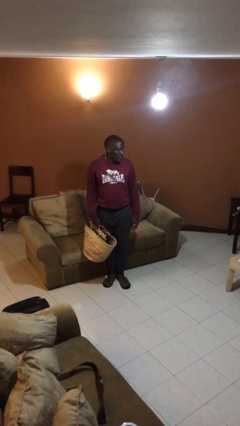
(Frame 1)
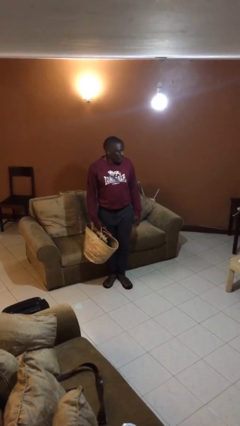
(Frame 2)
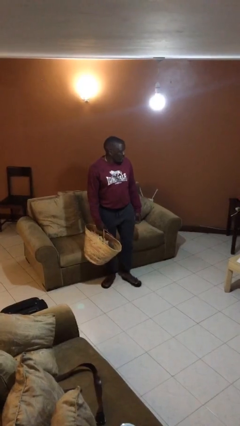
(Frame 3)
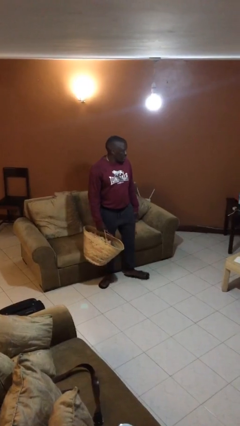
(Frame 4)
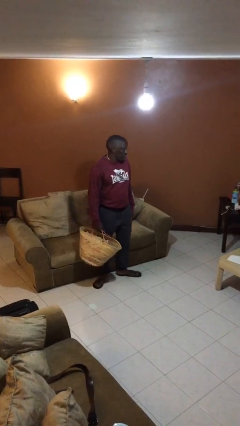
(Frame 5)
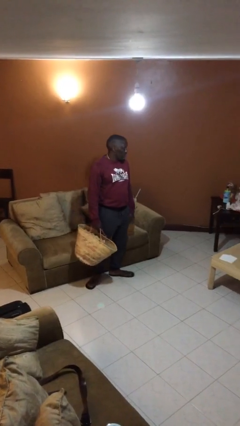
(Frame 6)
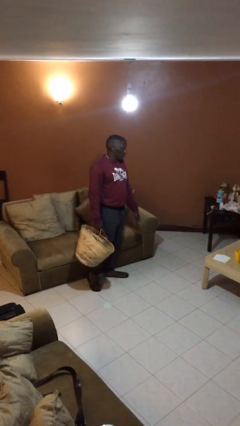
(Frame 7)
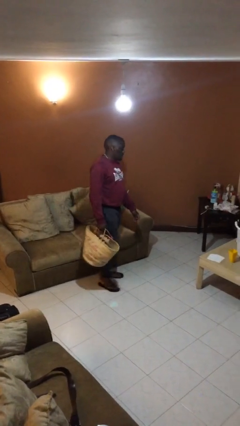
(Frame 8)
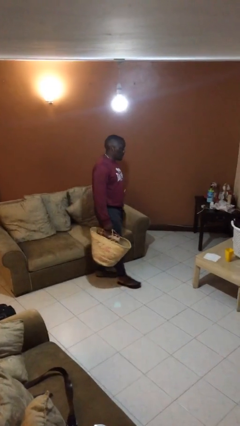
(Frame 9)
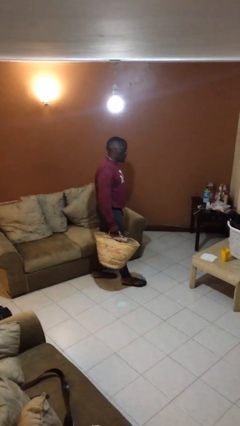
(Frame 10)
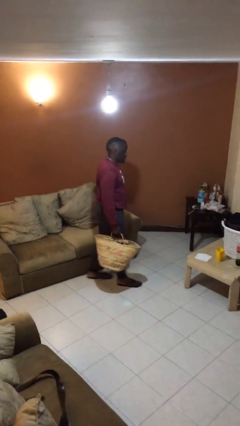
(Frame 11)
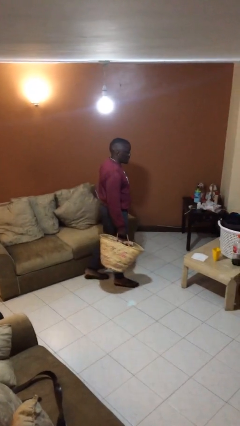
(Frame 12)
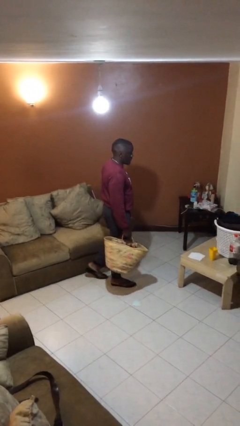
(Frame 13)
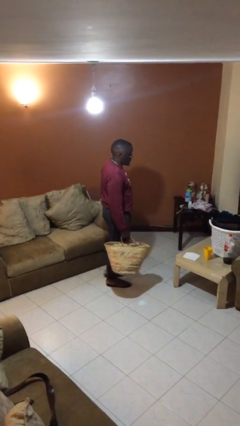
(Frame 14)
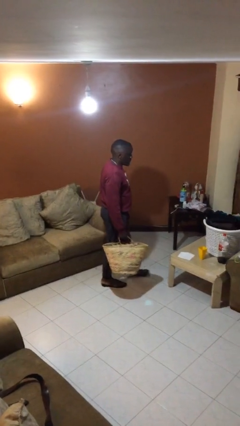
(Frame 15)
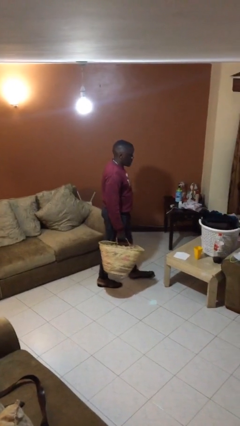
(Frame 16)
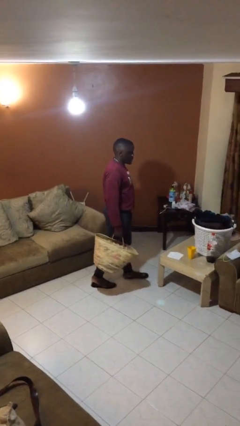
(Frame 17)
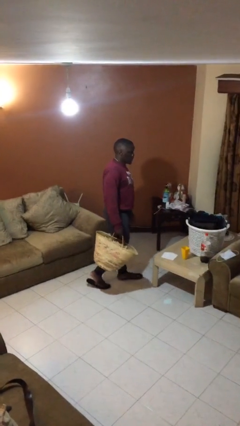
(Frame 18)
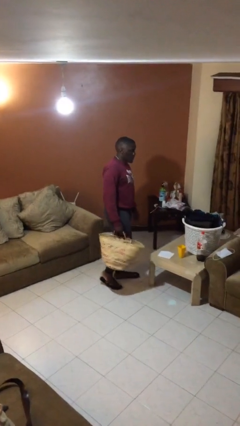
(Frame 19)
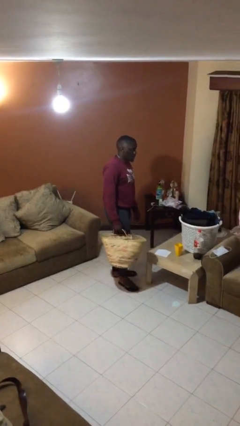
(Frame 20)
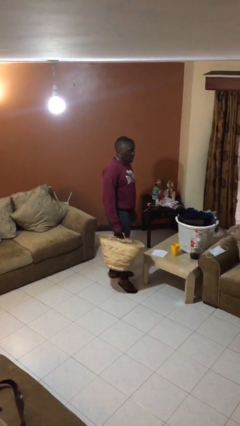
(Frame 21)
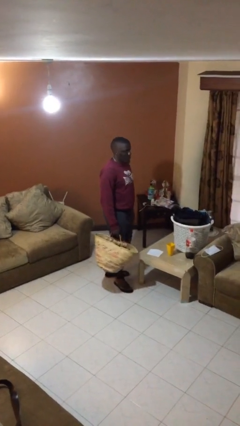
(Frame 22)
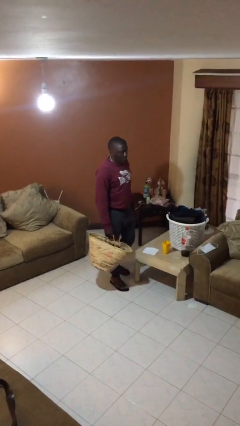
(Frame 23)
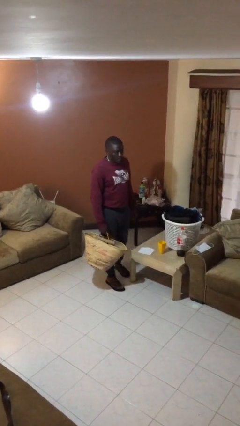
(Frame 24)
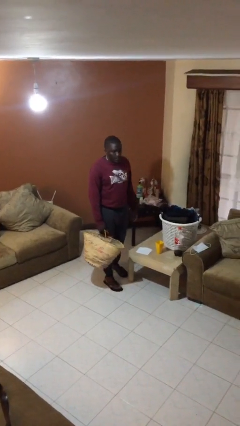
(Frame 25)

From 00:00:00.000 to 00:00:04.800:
person carries groceries

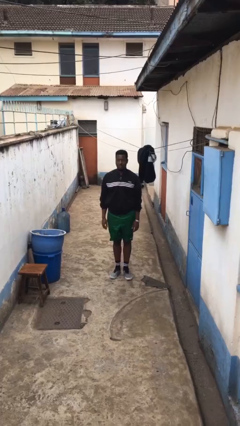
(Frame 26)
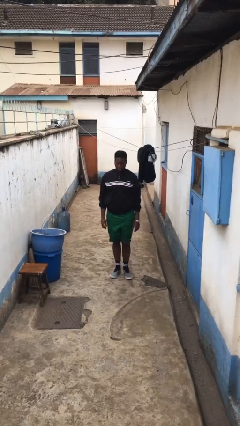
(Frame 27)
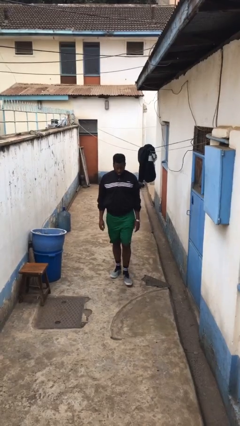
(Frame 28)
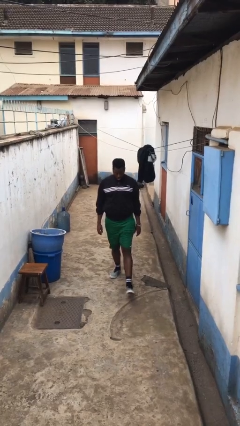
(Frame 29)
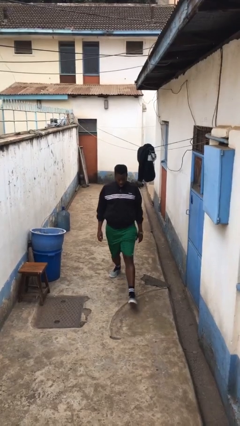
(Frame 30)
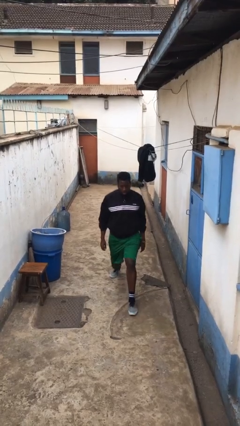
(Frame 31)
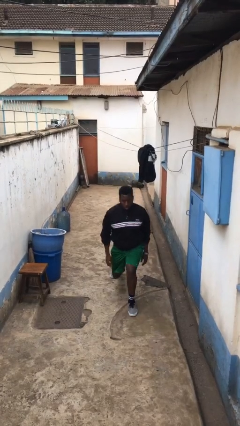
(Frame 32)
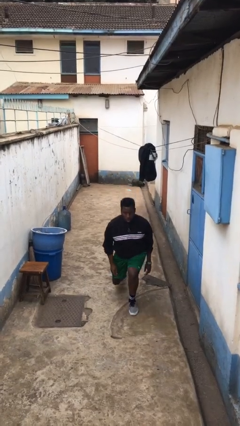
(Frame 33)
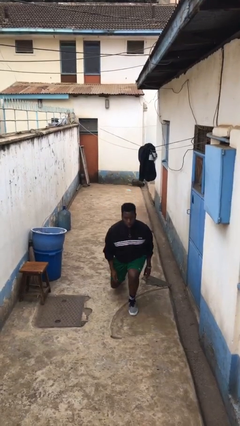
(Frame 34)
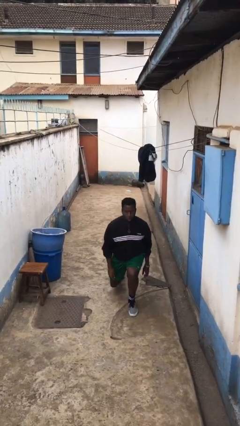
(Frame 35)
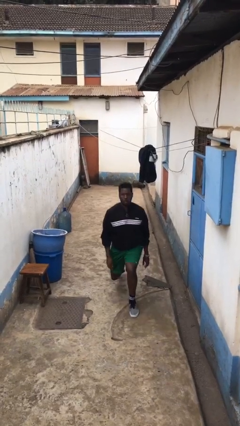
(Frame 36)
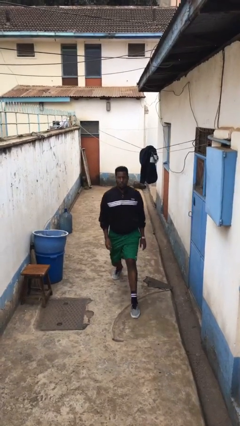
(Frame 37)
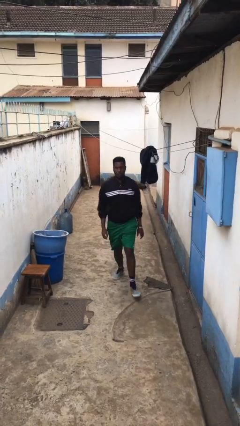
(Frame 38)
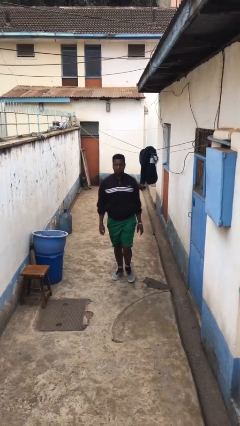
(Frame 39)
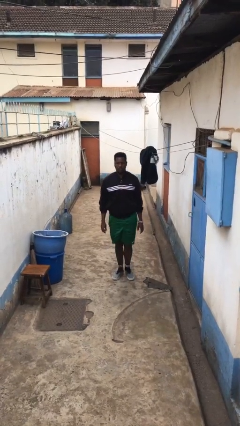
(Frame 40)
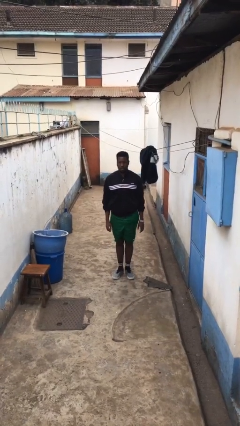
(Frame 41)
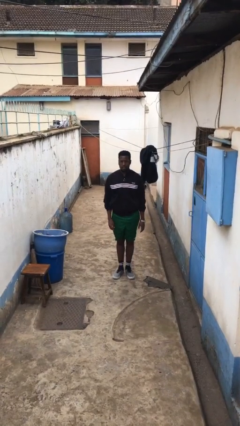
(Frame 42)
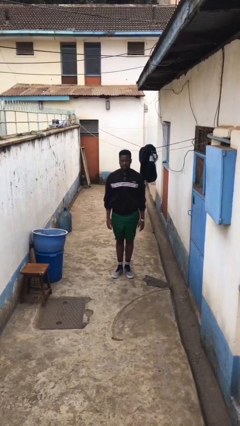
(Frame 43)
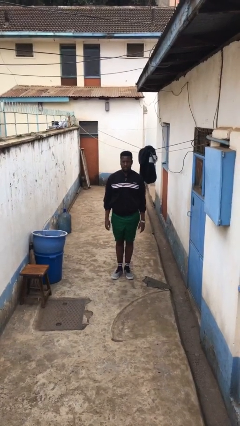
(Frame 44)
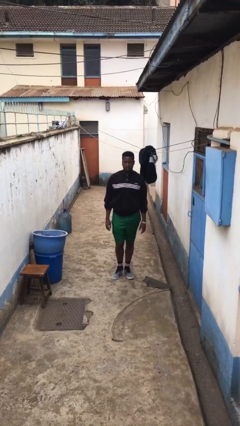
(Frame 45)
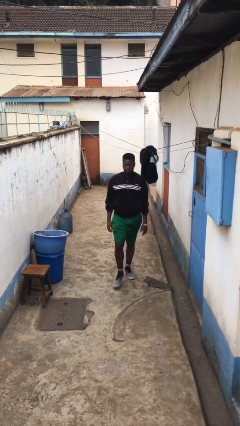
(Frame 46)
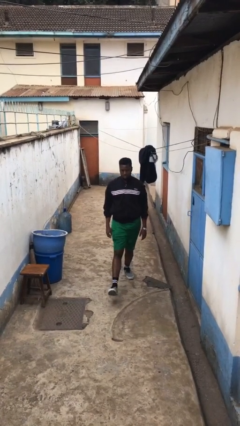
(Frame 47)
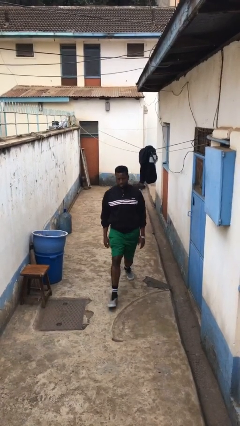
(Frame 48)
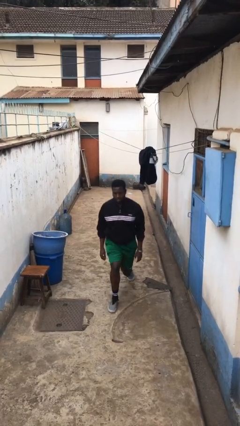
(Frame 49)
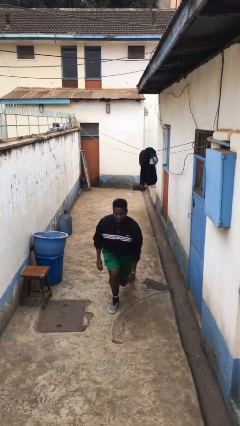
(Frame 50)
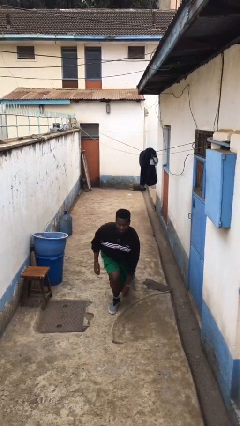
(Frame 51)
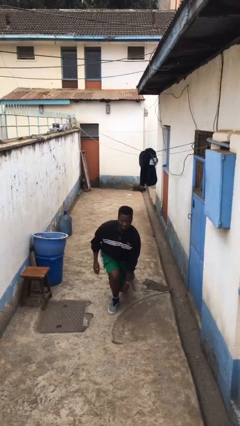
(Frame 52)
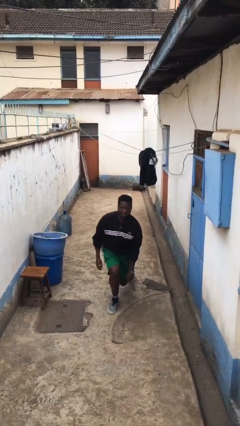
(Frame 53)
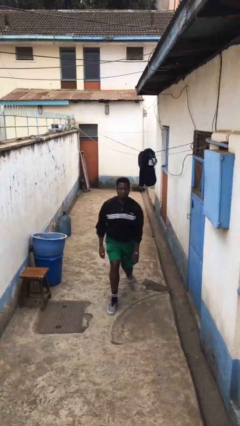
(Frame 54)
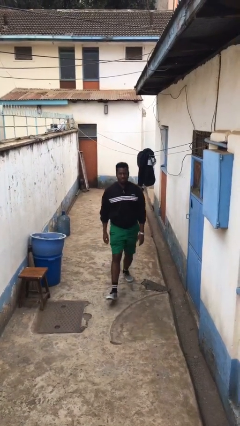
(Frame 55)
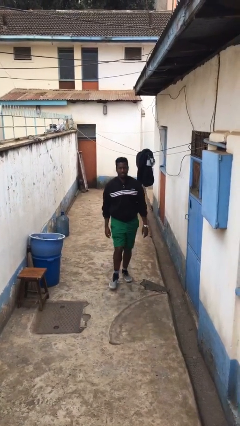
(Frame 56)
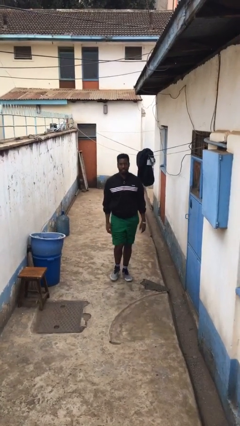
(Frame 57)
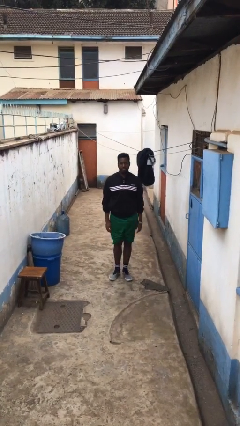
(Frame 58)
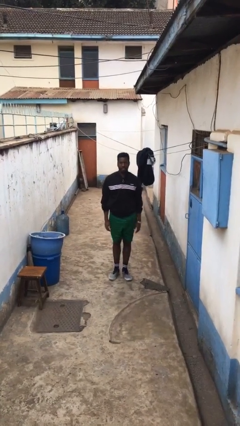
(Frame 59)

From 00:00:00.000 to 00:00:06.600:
person exercises with lunges

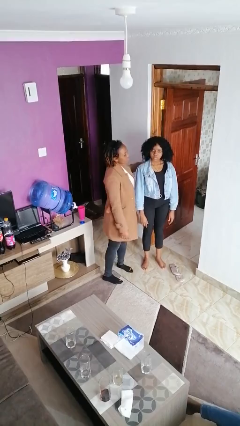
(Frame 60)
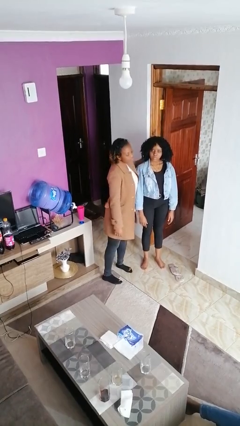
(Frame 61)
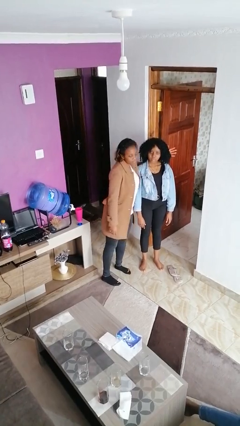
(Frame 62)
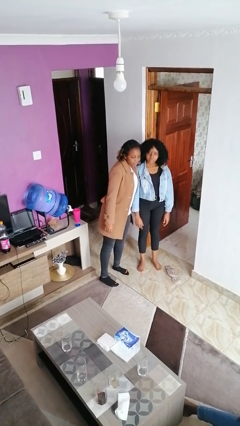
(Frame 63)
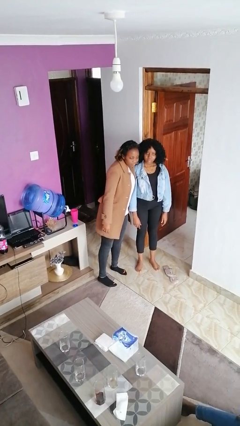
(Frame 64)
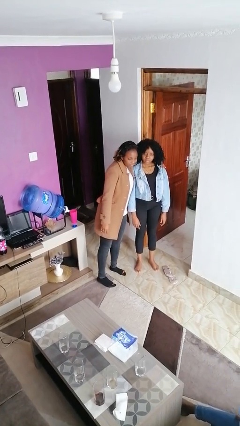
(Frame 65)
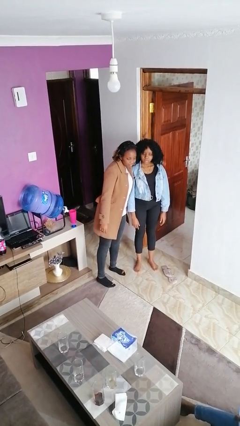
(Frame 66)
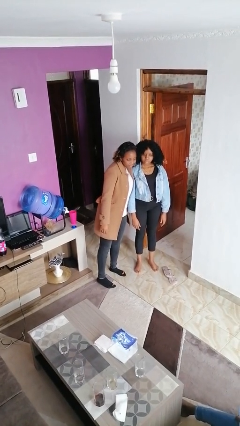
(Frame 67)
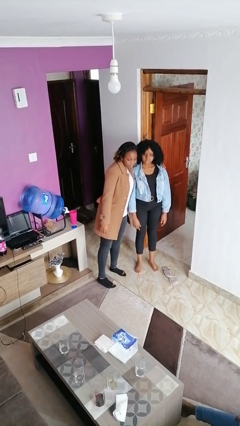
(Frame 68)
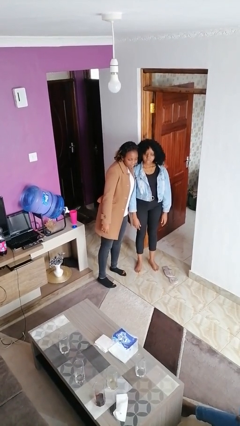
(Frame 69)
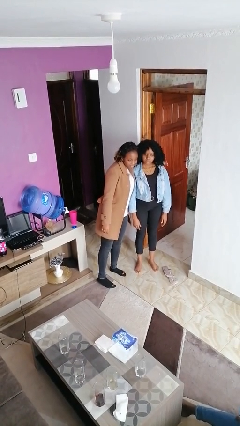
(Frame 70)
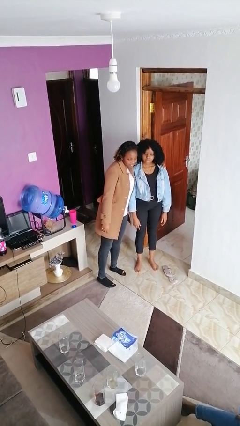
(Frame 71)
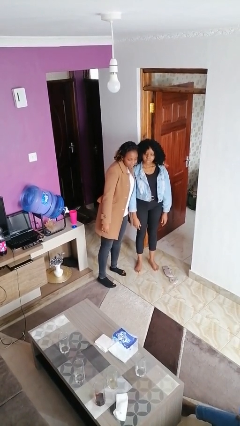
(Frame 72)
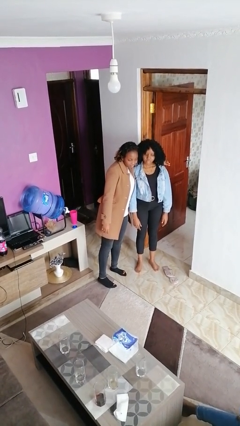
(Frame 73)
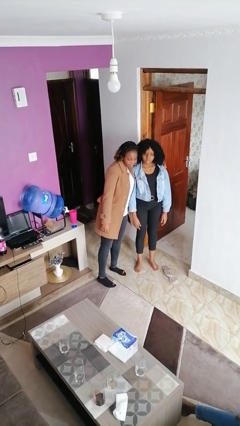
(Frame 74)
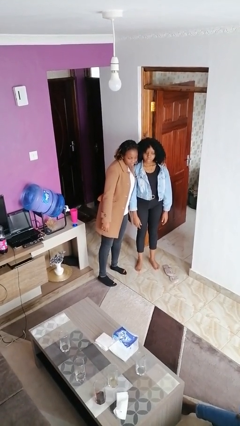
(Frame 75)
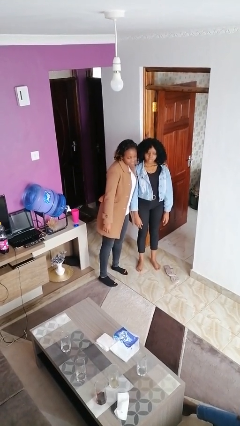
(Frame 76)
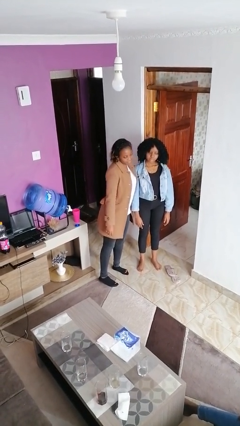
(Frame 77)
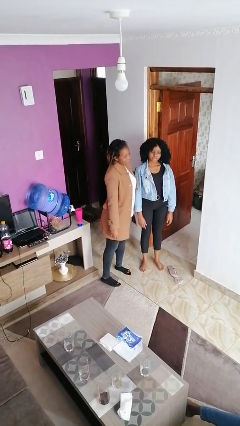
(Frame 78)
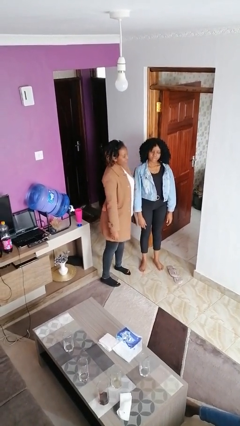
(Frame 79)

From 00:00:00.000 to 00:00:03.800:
person pounds shoulders of person

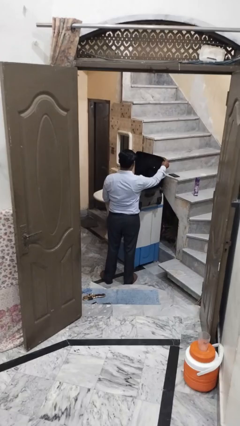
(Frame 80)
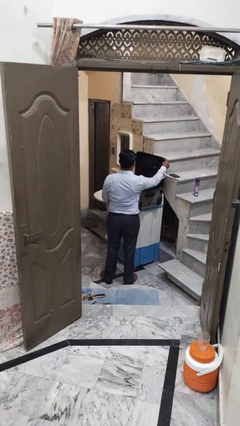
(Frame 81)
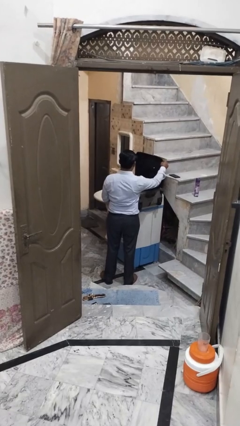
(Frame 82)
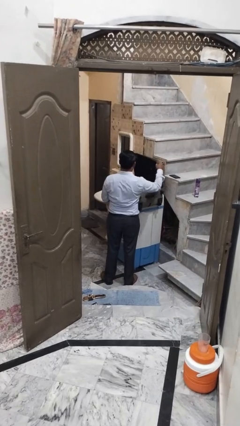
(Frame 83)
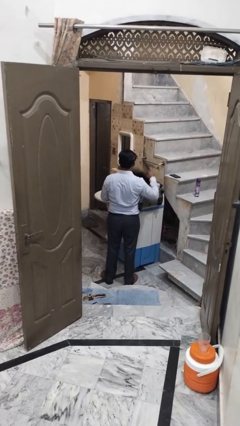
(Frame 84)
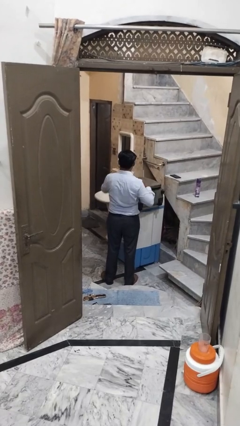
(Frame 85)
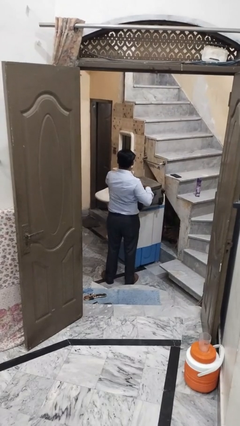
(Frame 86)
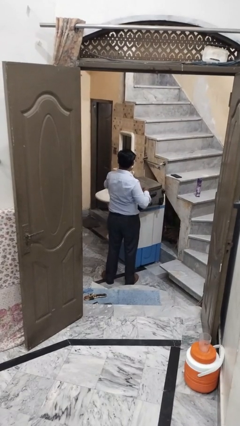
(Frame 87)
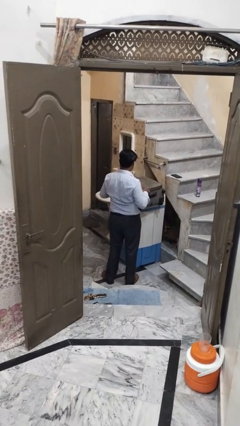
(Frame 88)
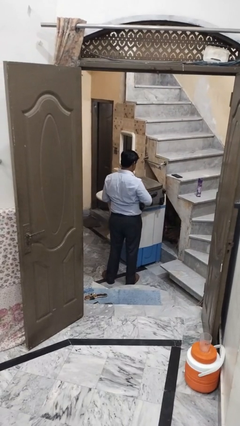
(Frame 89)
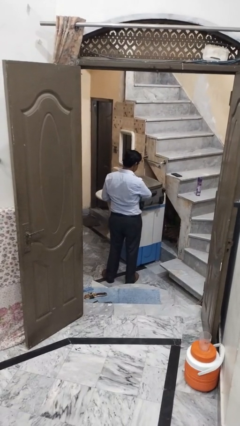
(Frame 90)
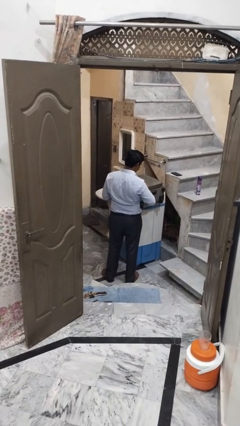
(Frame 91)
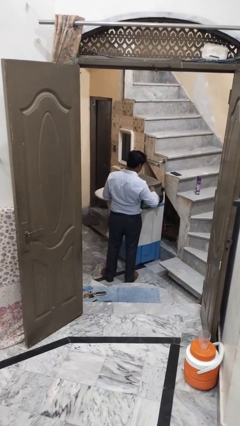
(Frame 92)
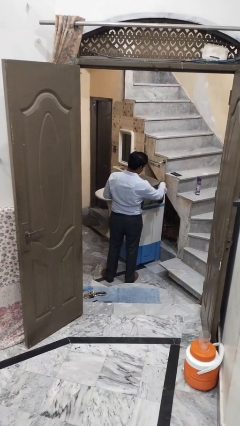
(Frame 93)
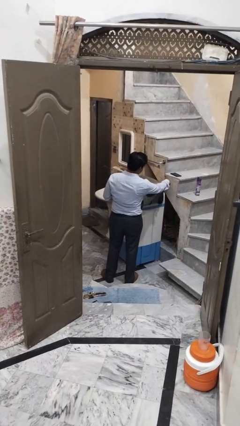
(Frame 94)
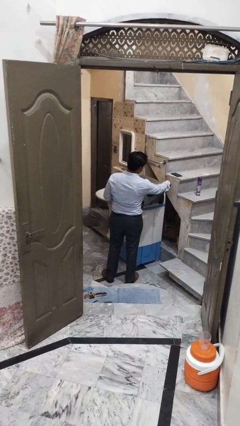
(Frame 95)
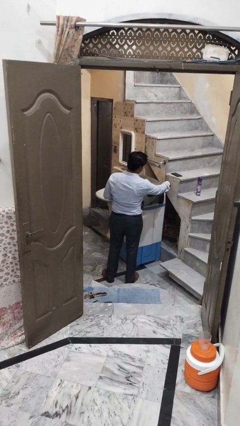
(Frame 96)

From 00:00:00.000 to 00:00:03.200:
person closes suitcase
